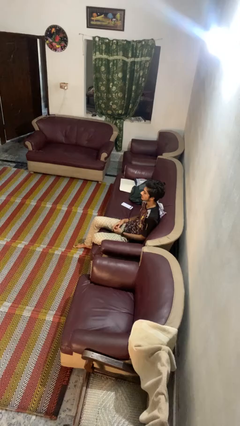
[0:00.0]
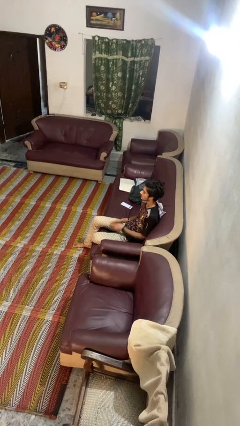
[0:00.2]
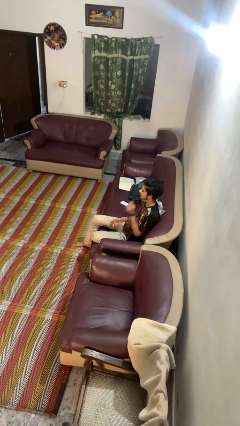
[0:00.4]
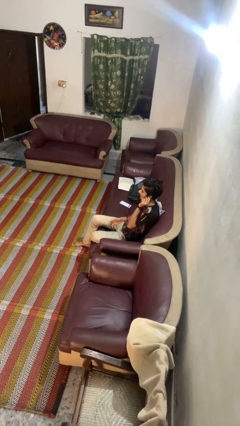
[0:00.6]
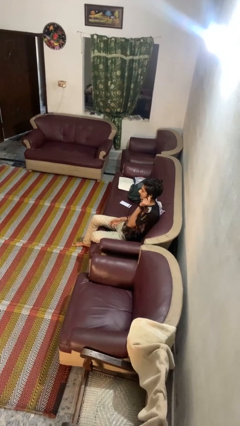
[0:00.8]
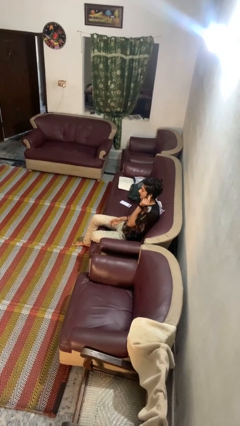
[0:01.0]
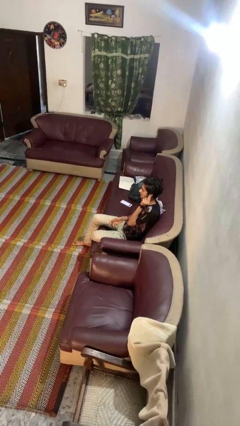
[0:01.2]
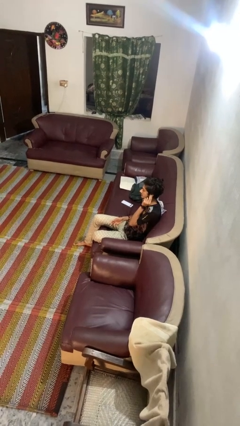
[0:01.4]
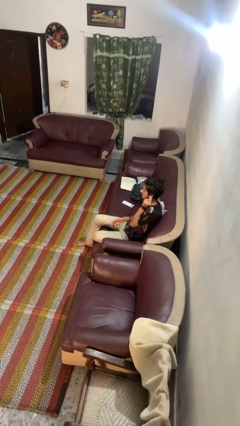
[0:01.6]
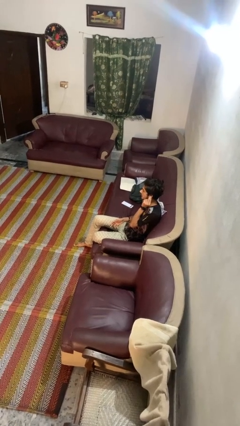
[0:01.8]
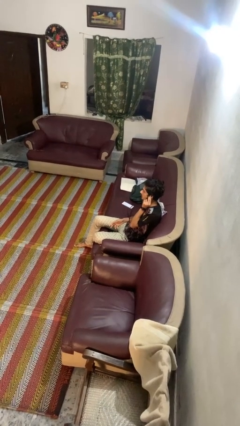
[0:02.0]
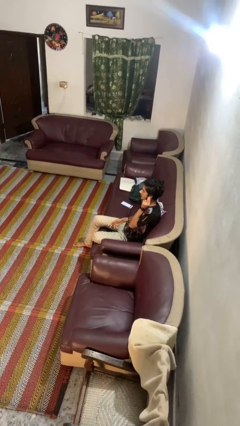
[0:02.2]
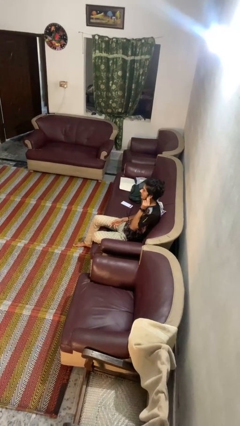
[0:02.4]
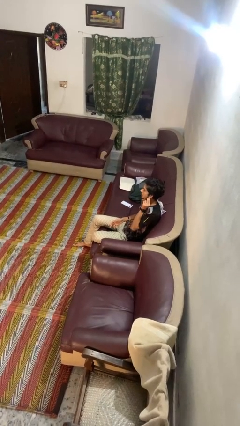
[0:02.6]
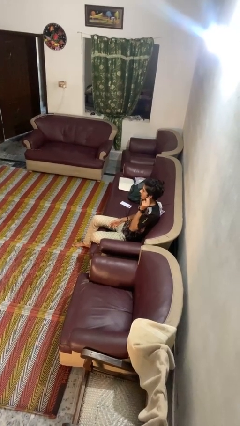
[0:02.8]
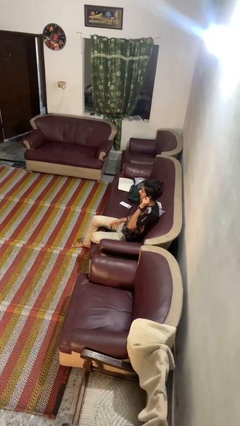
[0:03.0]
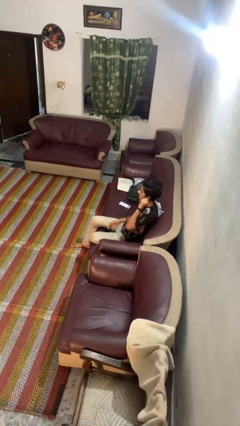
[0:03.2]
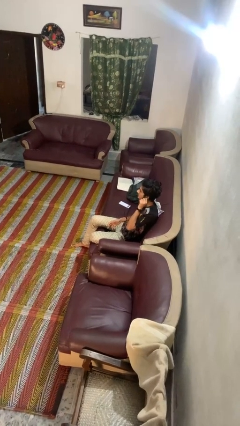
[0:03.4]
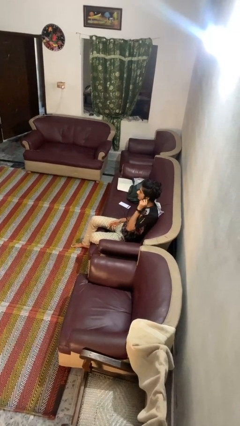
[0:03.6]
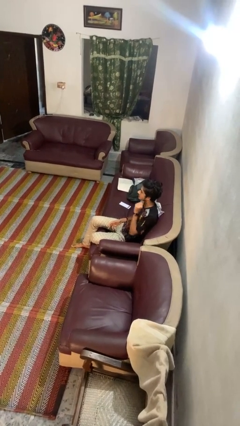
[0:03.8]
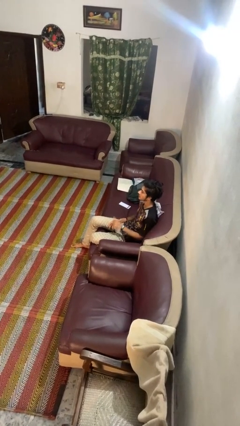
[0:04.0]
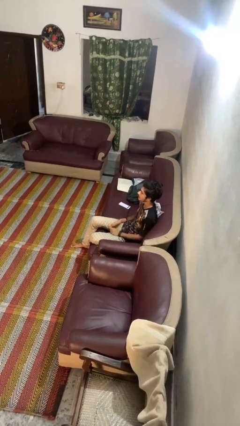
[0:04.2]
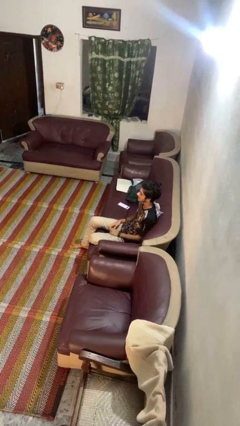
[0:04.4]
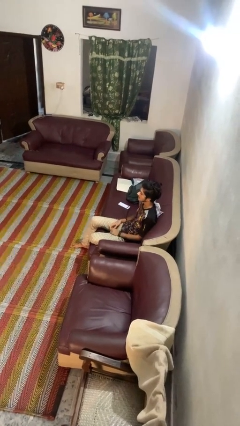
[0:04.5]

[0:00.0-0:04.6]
person touches earlobe

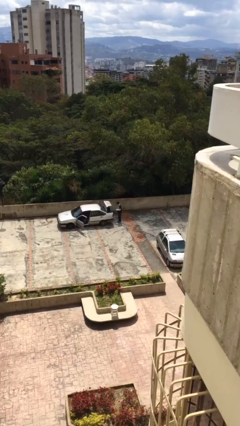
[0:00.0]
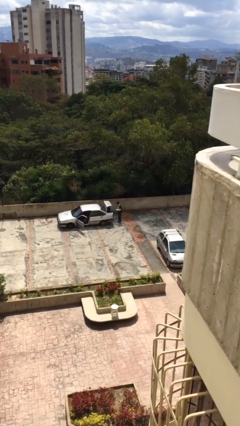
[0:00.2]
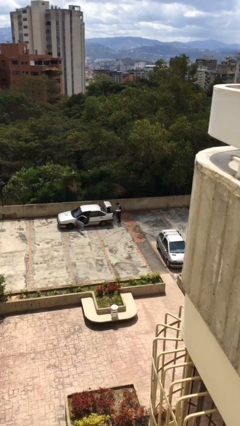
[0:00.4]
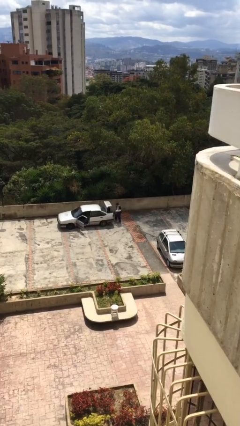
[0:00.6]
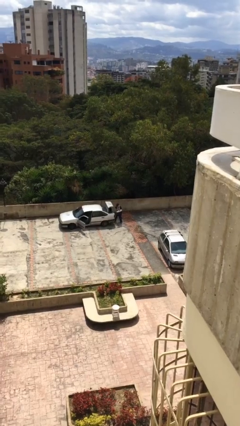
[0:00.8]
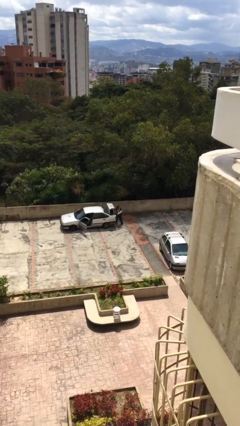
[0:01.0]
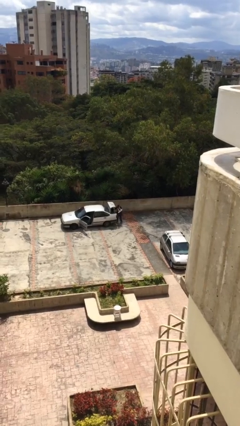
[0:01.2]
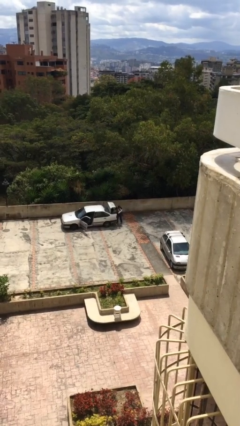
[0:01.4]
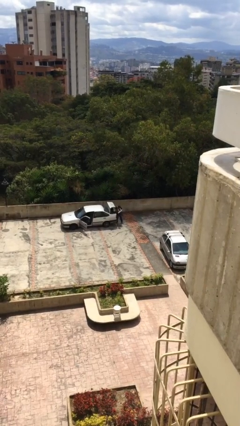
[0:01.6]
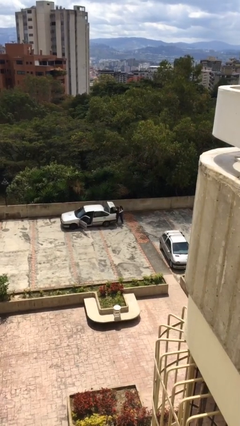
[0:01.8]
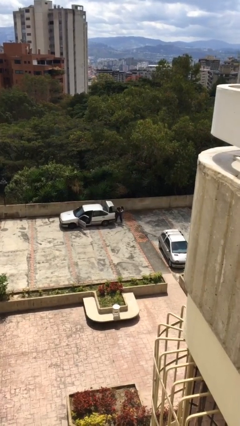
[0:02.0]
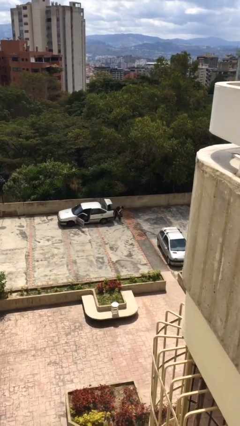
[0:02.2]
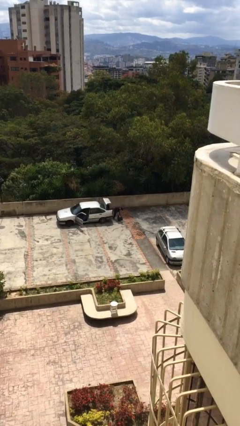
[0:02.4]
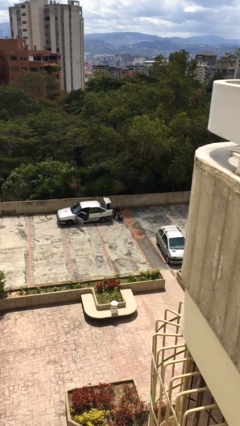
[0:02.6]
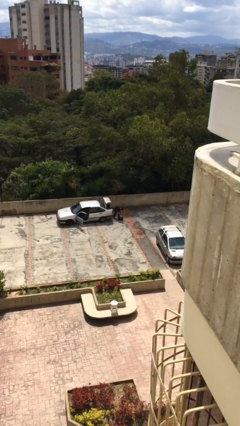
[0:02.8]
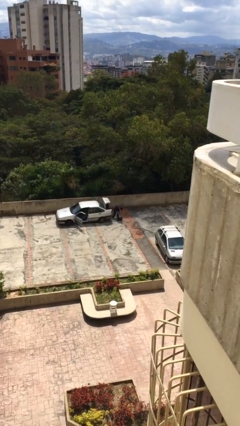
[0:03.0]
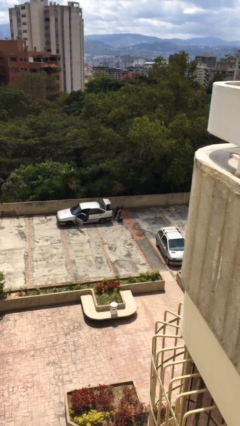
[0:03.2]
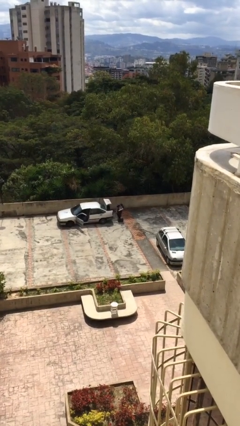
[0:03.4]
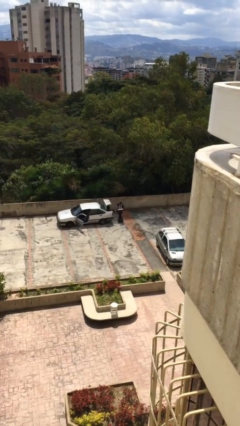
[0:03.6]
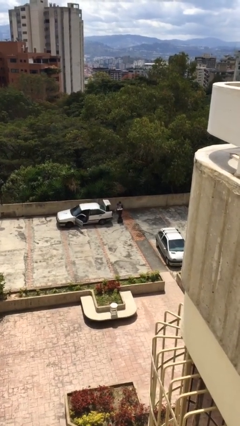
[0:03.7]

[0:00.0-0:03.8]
person unloads car

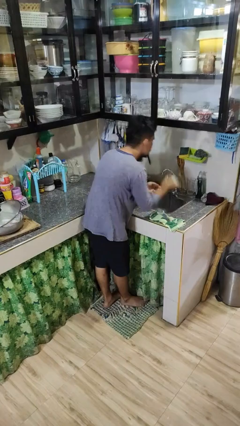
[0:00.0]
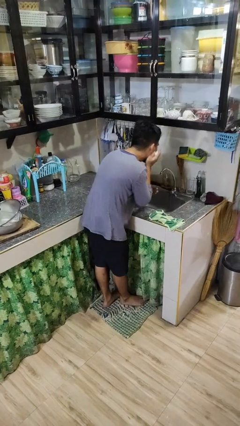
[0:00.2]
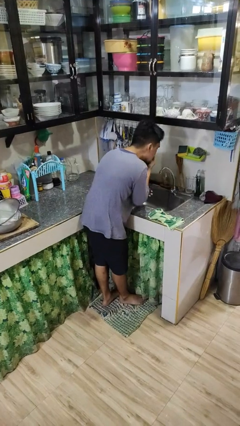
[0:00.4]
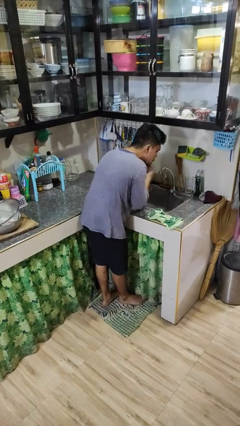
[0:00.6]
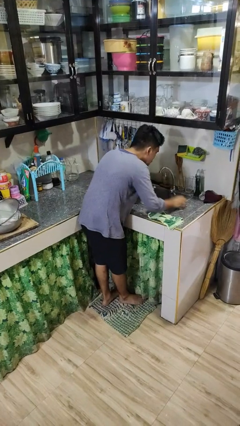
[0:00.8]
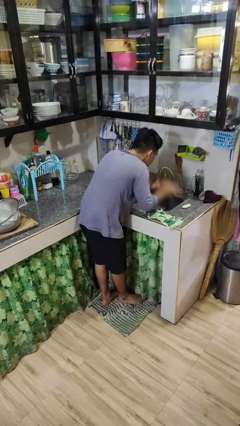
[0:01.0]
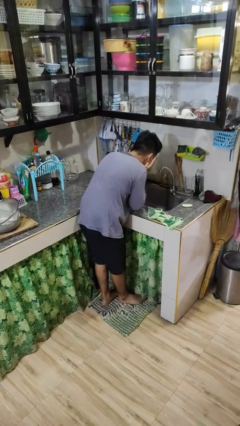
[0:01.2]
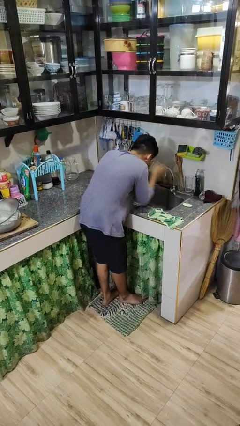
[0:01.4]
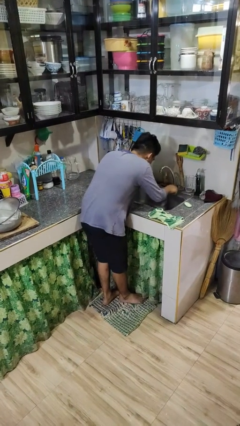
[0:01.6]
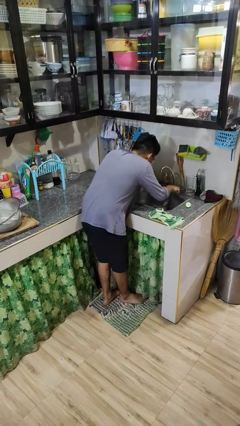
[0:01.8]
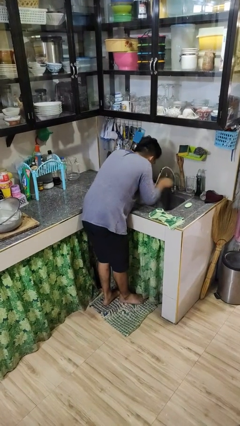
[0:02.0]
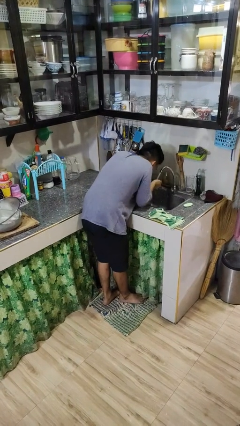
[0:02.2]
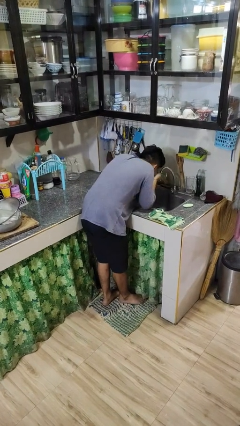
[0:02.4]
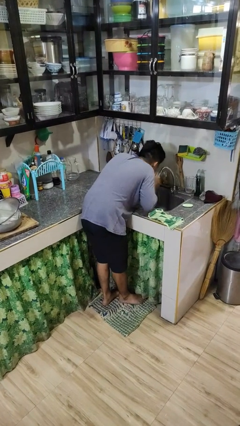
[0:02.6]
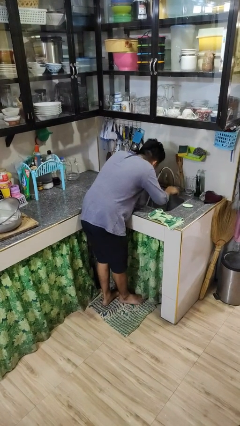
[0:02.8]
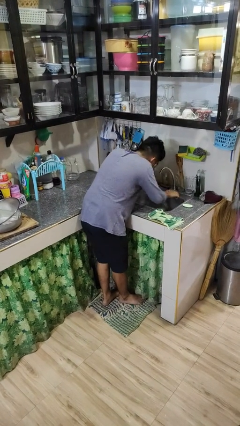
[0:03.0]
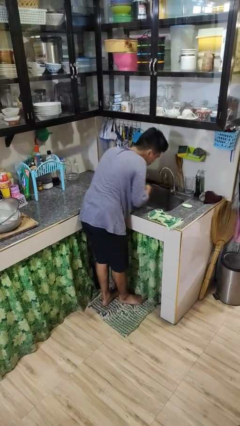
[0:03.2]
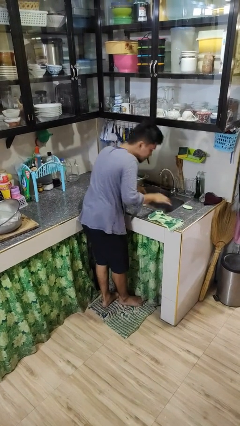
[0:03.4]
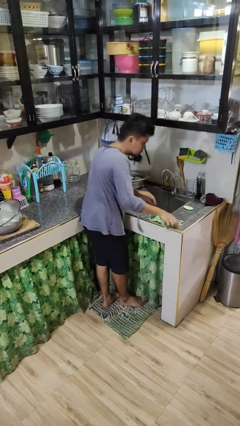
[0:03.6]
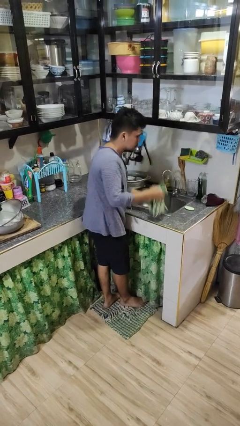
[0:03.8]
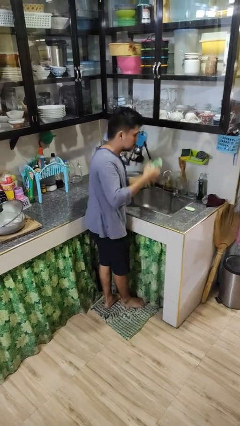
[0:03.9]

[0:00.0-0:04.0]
person washes face

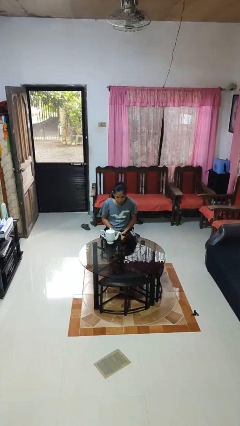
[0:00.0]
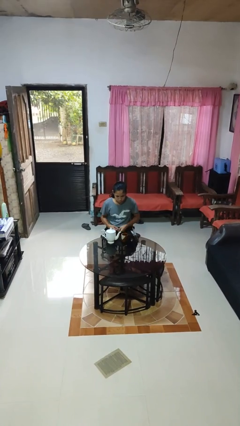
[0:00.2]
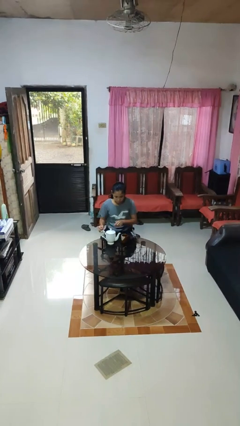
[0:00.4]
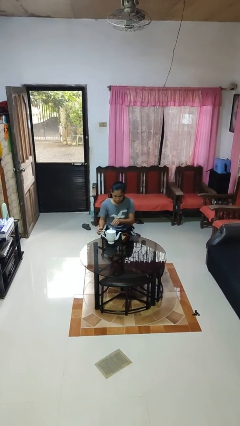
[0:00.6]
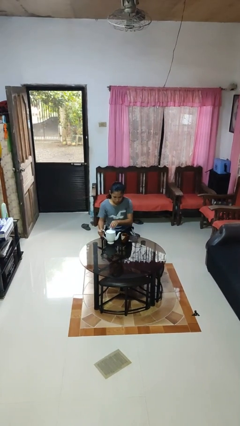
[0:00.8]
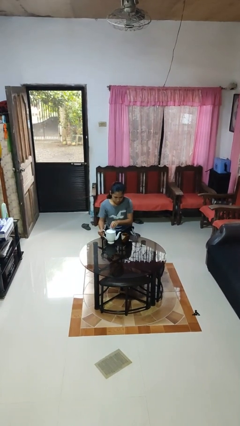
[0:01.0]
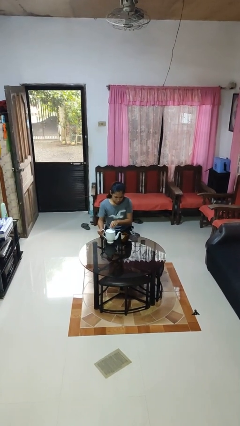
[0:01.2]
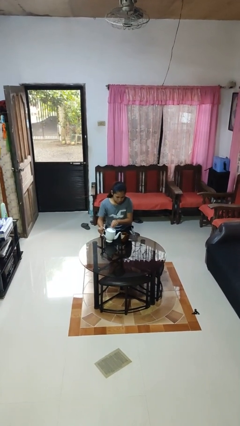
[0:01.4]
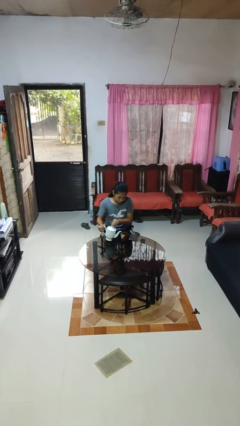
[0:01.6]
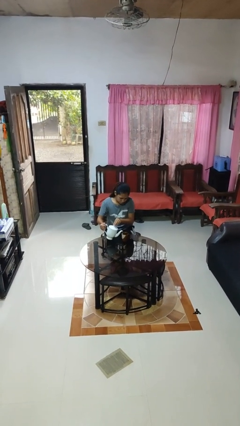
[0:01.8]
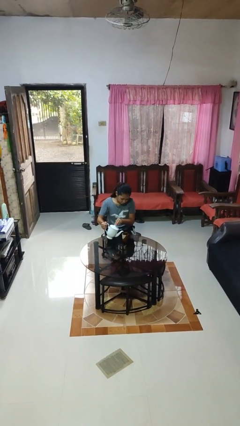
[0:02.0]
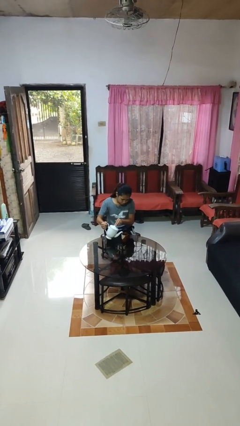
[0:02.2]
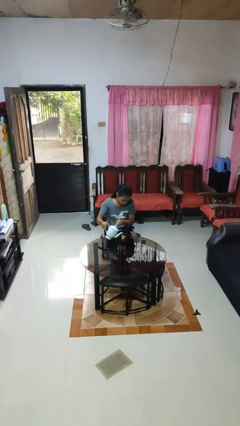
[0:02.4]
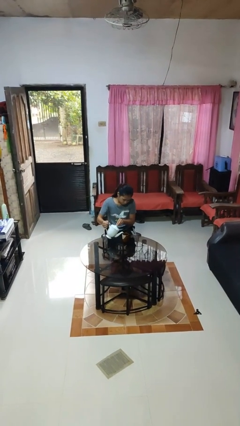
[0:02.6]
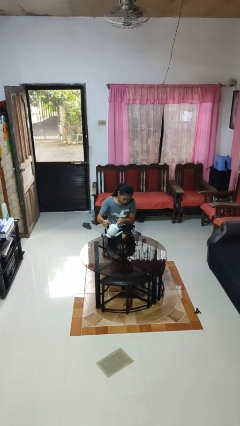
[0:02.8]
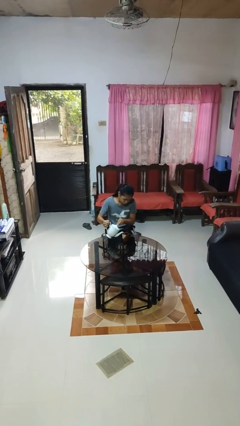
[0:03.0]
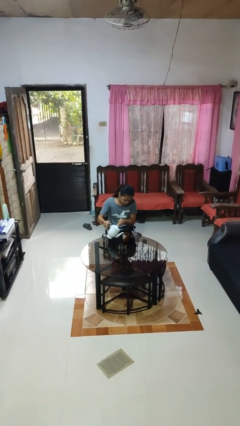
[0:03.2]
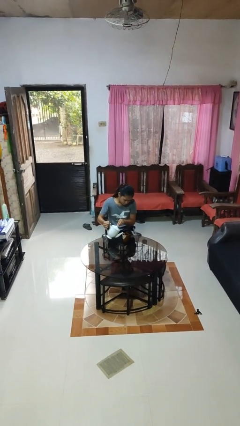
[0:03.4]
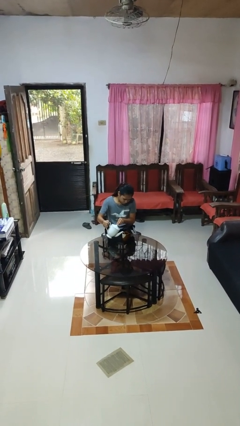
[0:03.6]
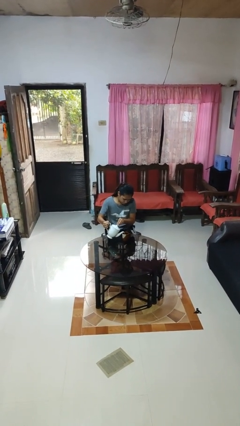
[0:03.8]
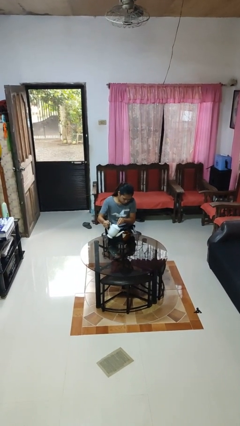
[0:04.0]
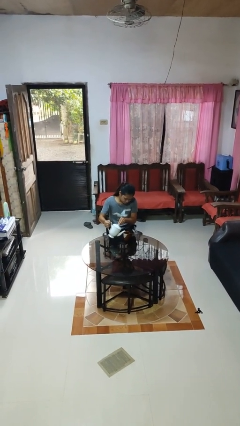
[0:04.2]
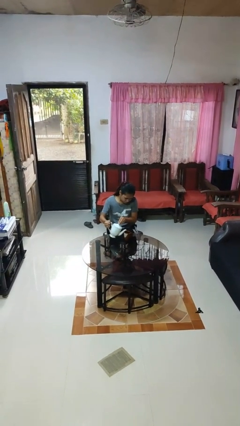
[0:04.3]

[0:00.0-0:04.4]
person pours coffee into mug

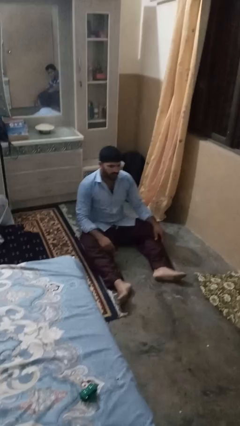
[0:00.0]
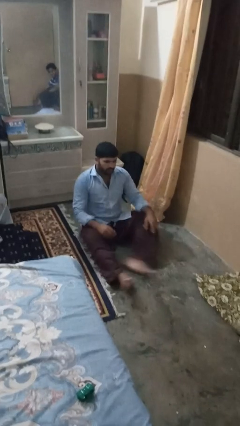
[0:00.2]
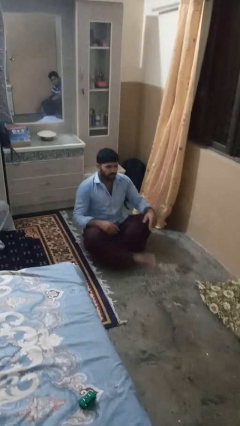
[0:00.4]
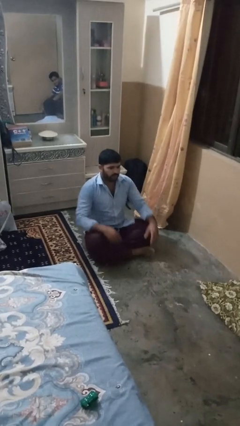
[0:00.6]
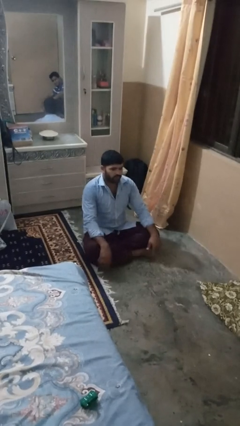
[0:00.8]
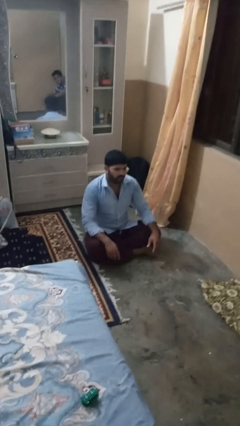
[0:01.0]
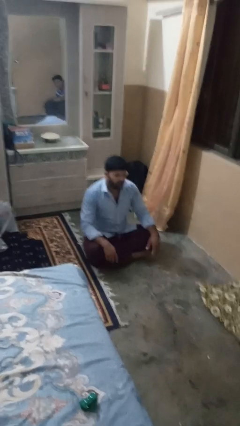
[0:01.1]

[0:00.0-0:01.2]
person crosses legs
